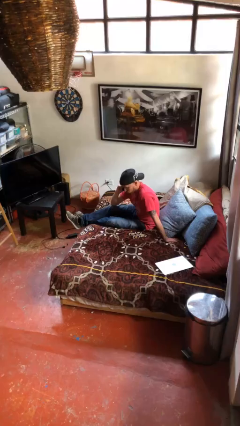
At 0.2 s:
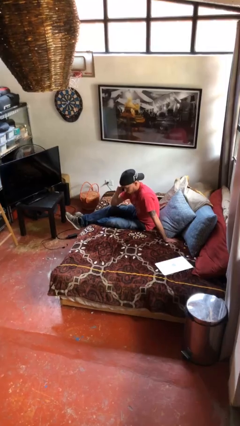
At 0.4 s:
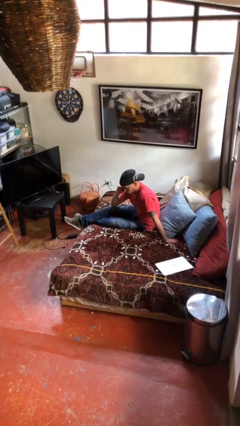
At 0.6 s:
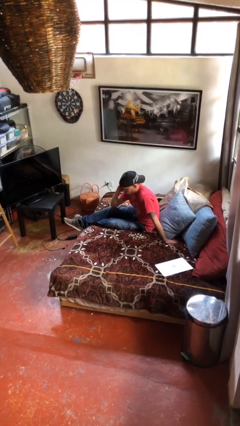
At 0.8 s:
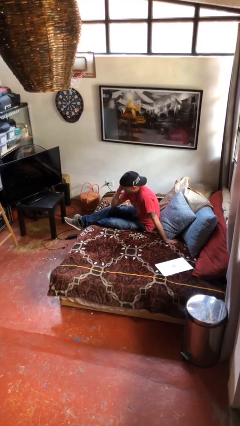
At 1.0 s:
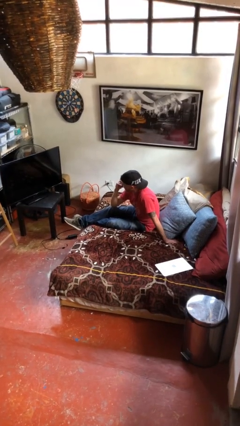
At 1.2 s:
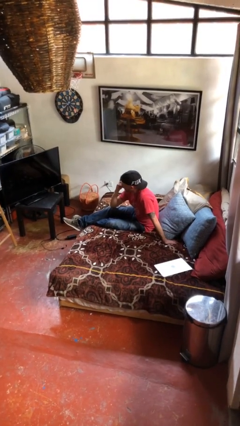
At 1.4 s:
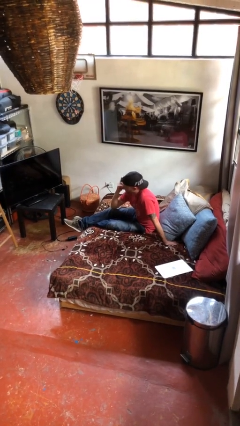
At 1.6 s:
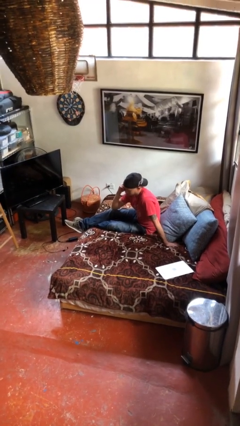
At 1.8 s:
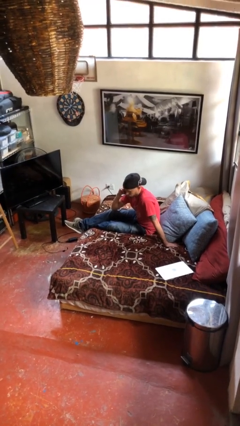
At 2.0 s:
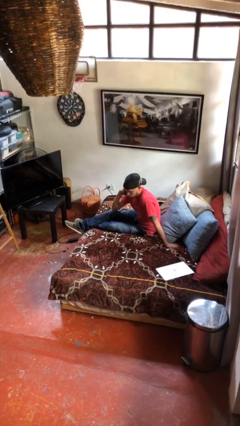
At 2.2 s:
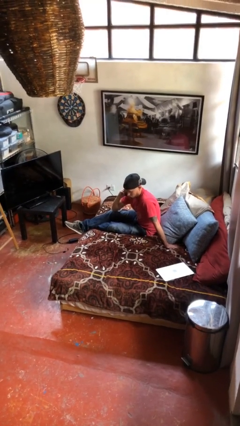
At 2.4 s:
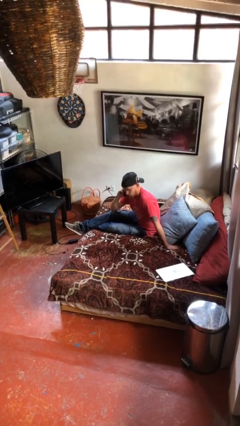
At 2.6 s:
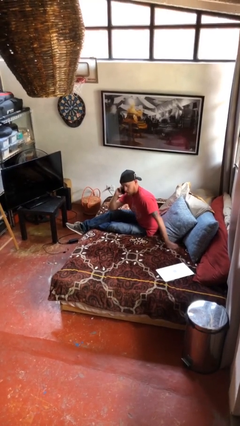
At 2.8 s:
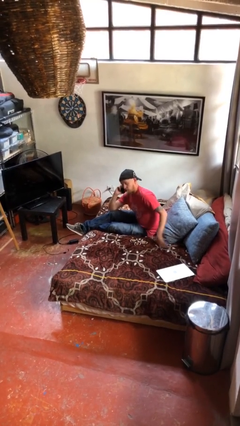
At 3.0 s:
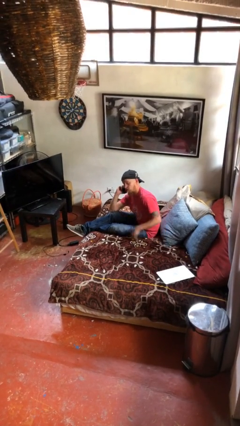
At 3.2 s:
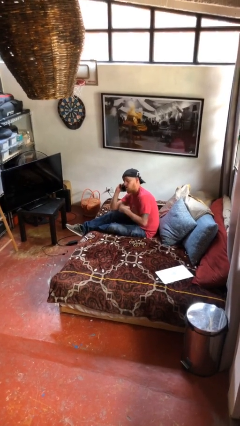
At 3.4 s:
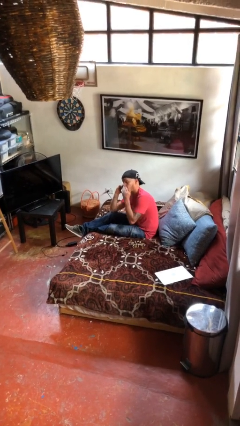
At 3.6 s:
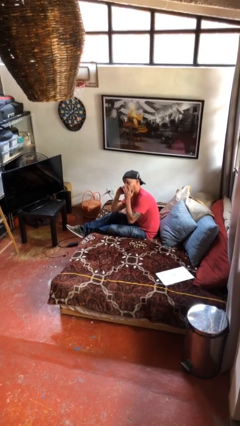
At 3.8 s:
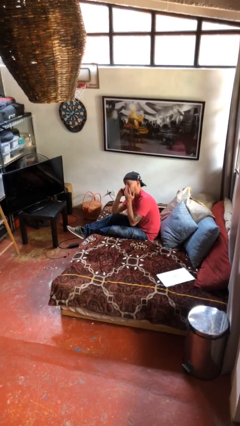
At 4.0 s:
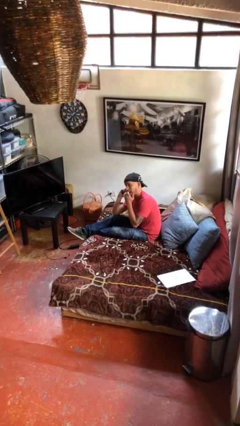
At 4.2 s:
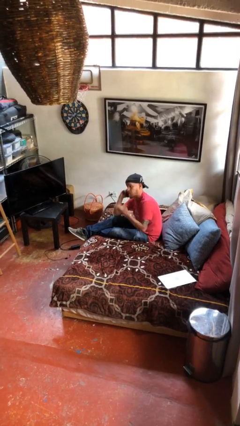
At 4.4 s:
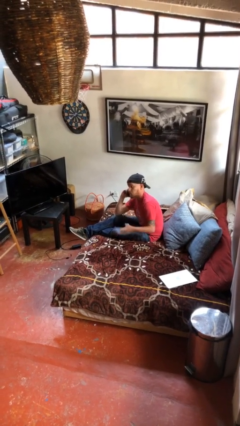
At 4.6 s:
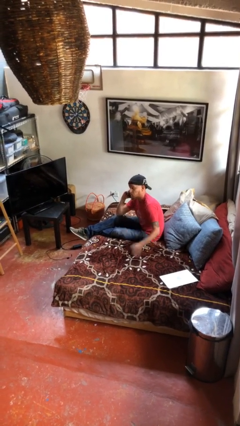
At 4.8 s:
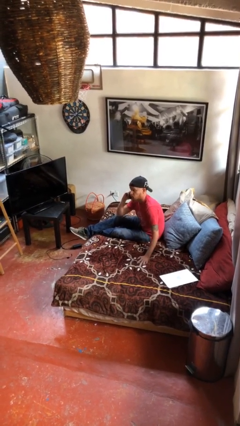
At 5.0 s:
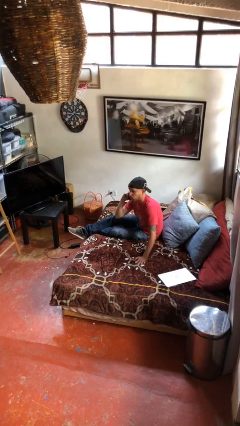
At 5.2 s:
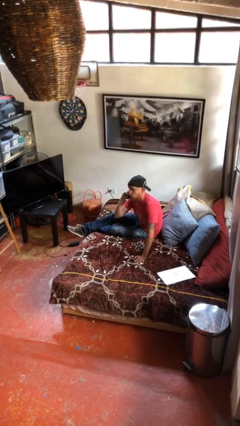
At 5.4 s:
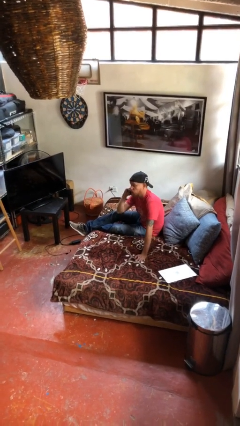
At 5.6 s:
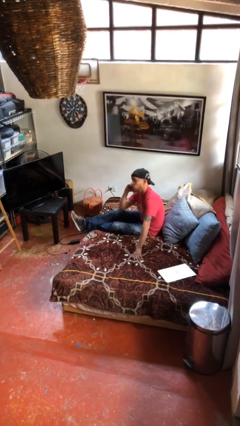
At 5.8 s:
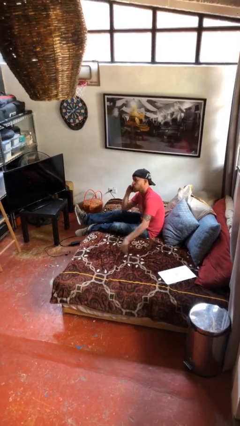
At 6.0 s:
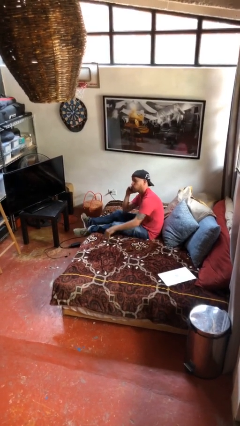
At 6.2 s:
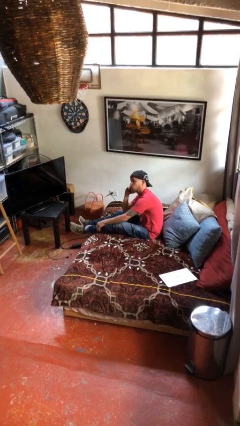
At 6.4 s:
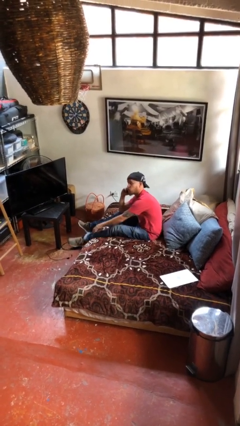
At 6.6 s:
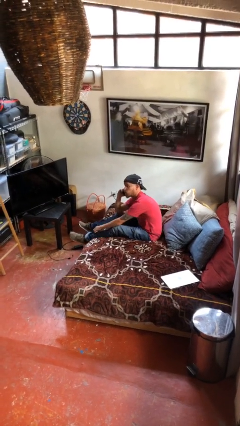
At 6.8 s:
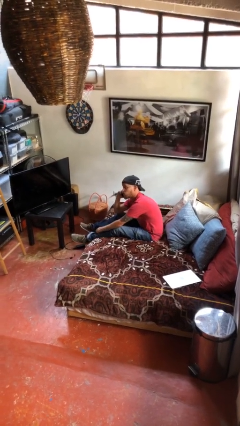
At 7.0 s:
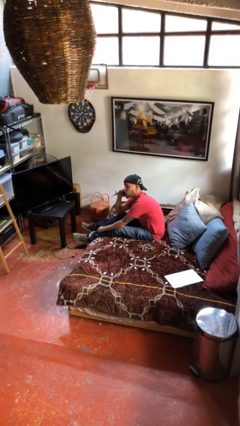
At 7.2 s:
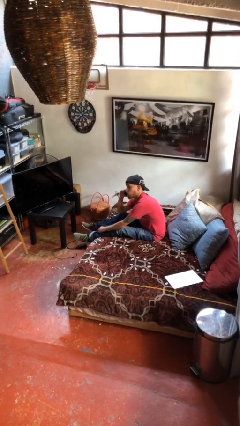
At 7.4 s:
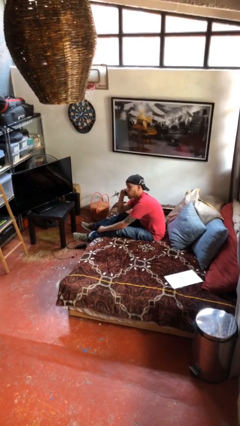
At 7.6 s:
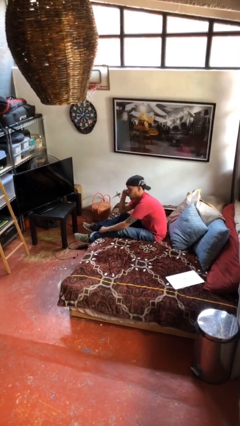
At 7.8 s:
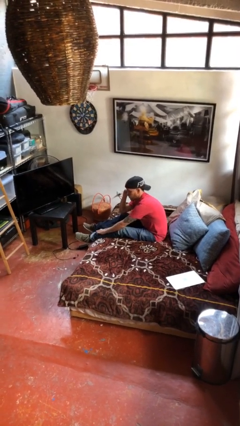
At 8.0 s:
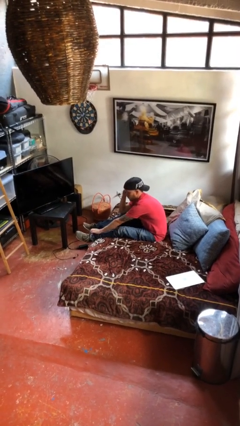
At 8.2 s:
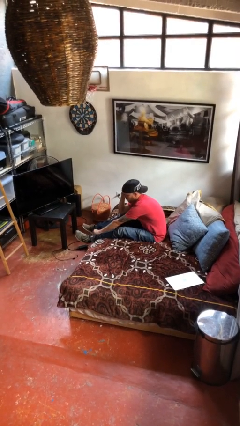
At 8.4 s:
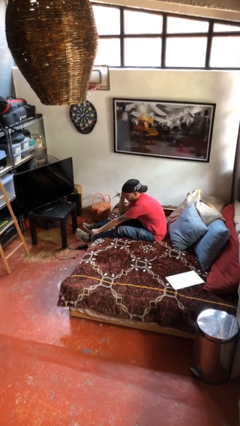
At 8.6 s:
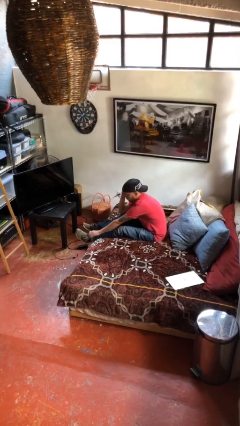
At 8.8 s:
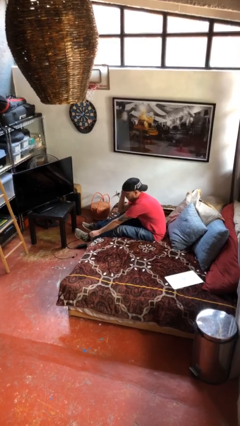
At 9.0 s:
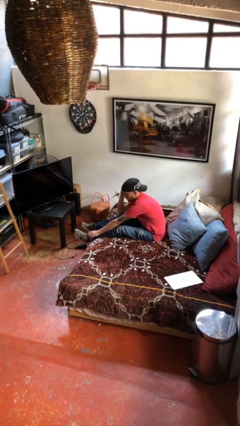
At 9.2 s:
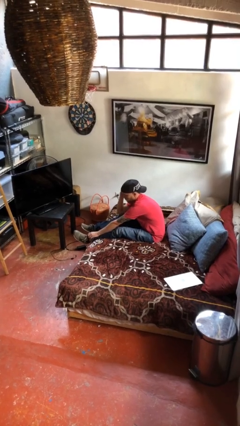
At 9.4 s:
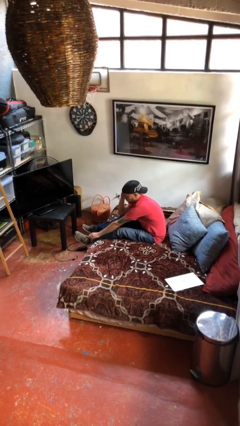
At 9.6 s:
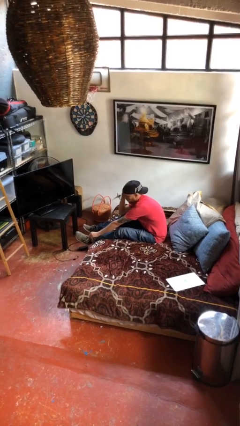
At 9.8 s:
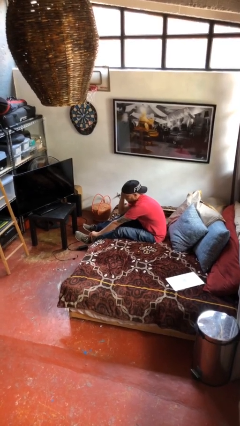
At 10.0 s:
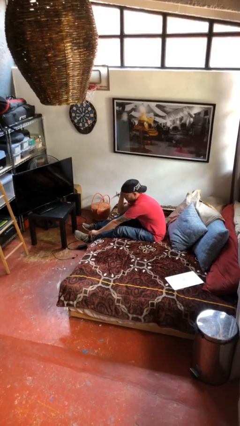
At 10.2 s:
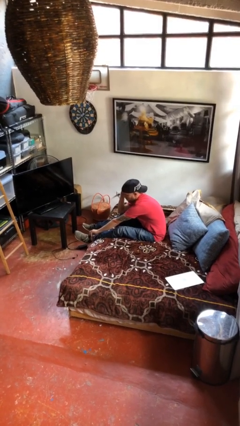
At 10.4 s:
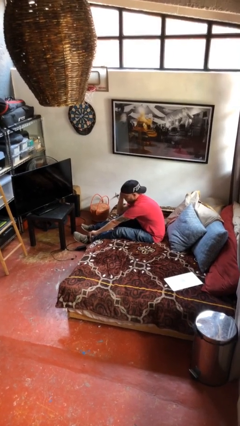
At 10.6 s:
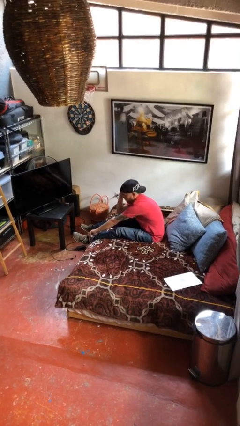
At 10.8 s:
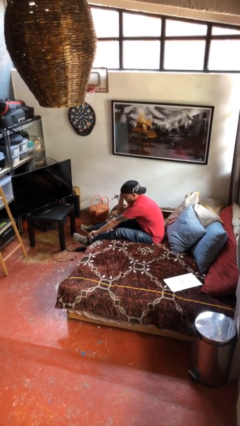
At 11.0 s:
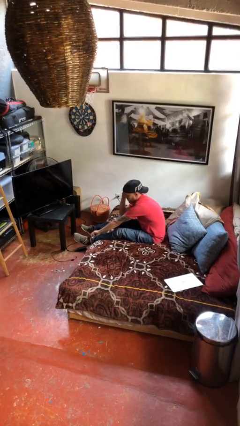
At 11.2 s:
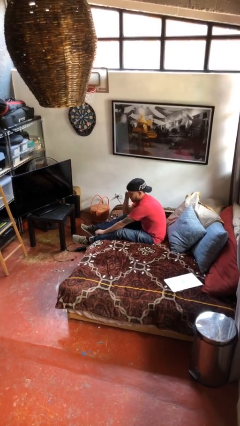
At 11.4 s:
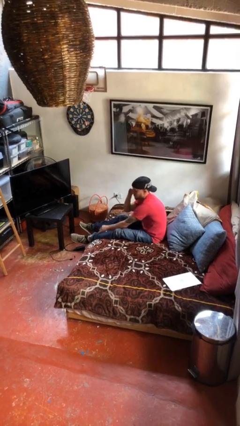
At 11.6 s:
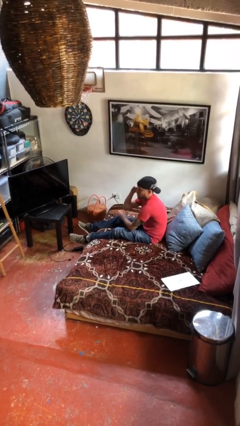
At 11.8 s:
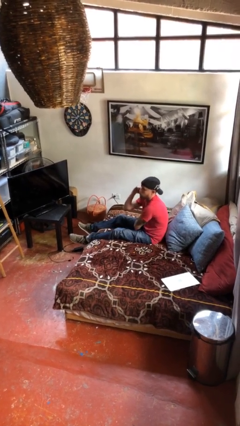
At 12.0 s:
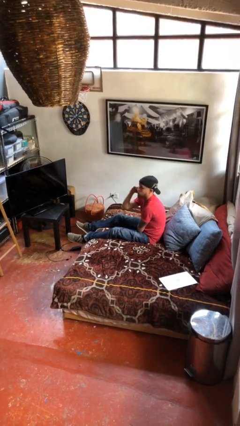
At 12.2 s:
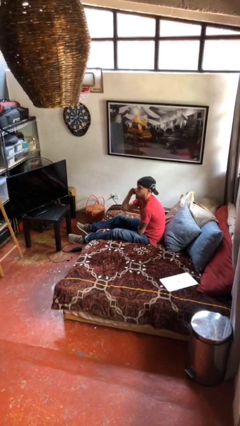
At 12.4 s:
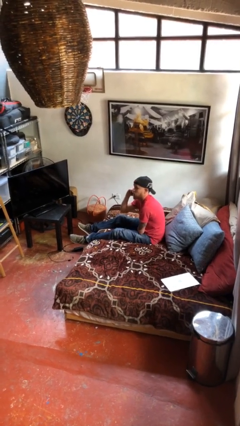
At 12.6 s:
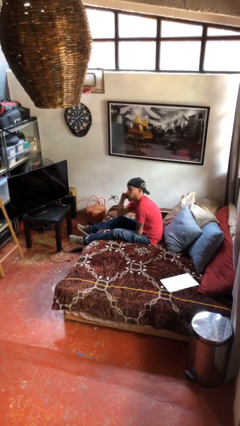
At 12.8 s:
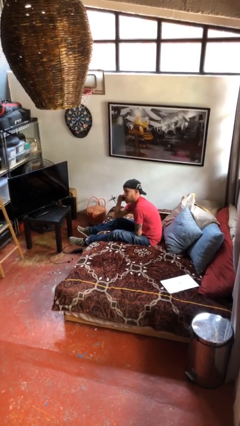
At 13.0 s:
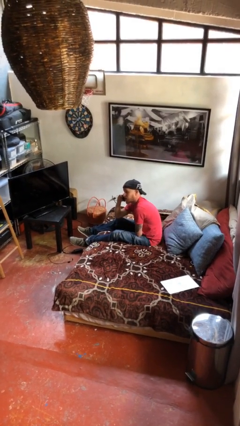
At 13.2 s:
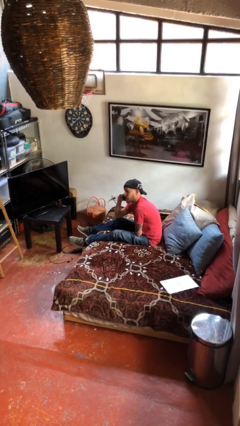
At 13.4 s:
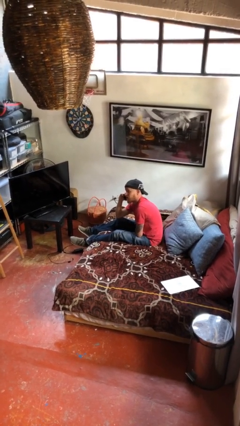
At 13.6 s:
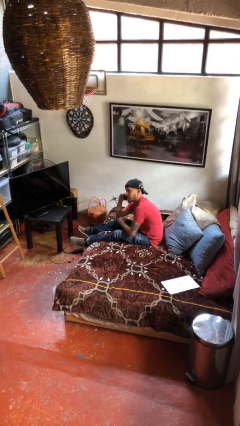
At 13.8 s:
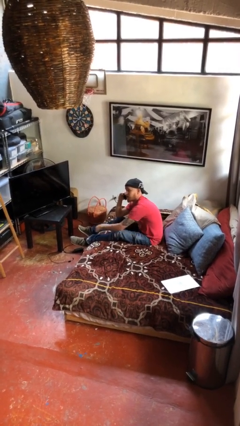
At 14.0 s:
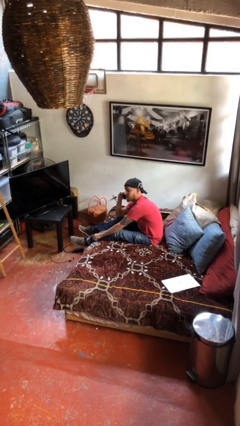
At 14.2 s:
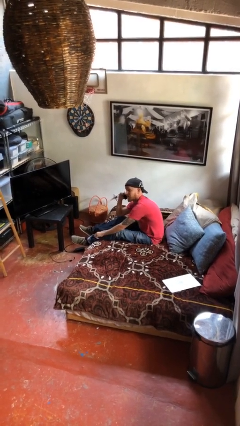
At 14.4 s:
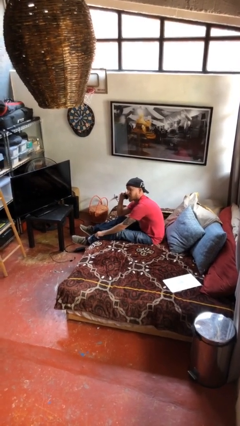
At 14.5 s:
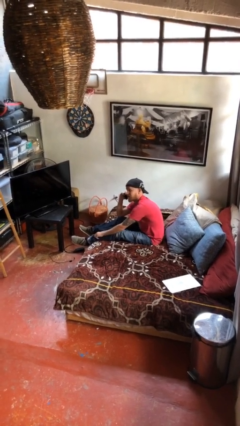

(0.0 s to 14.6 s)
person talks on phone

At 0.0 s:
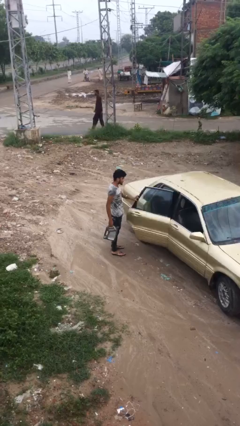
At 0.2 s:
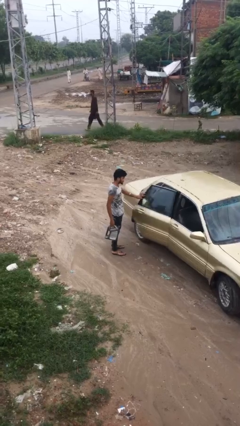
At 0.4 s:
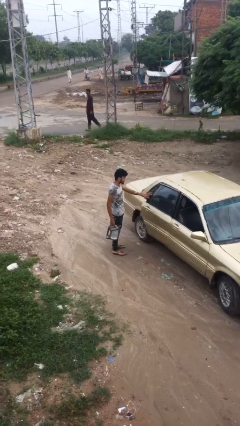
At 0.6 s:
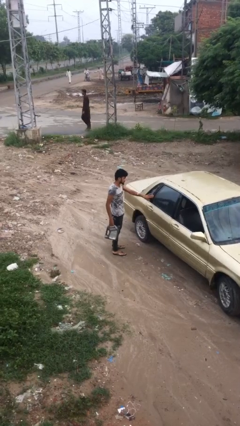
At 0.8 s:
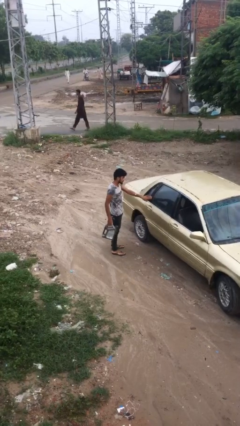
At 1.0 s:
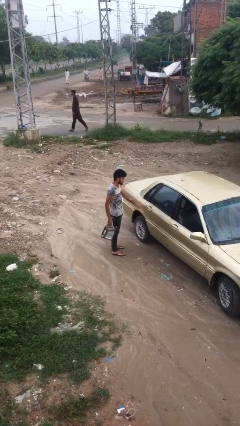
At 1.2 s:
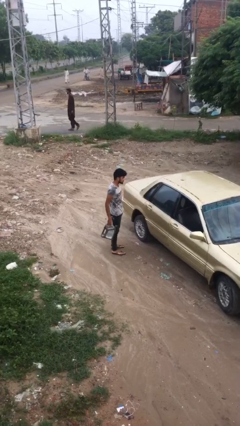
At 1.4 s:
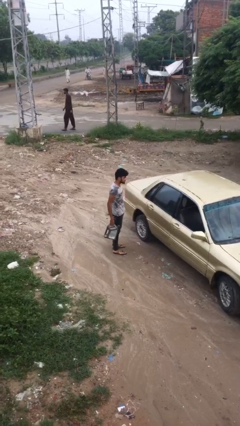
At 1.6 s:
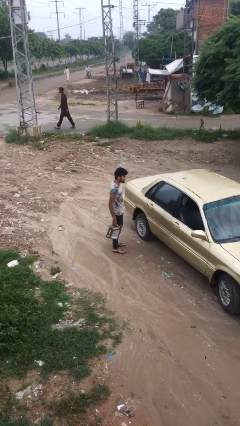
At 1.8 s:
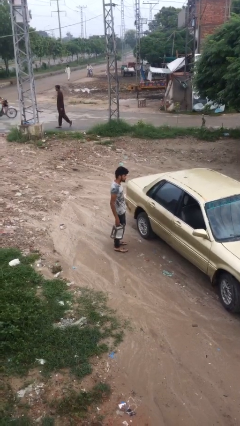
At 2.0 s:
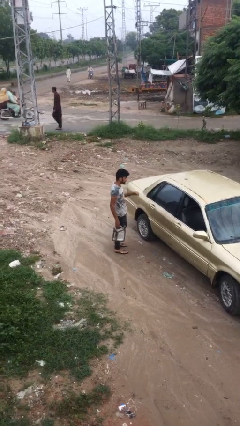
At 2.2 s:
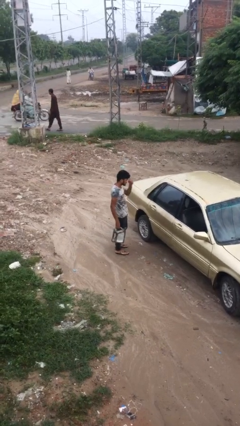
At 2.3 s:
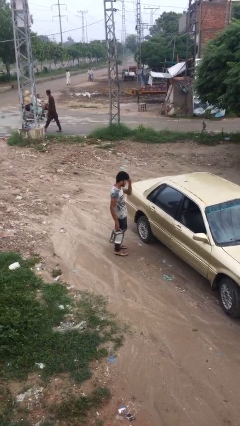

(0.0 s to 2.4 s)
person closes car door

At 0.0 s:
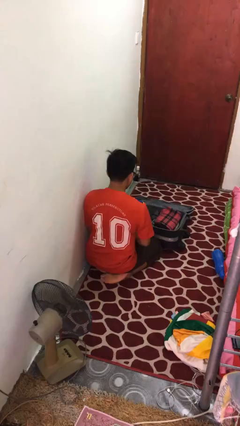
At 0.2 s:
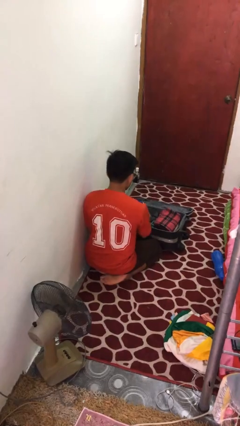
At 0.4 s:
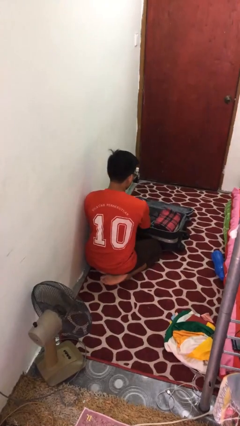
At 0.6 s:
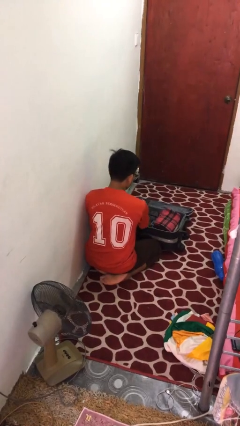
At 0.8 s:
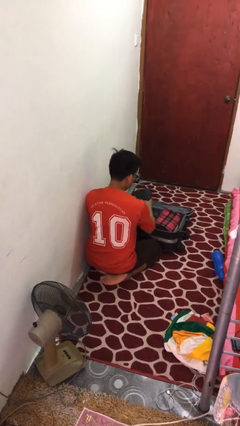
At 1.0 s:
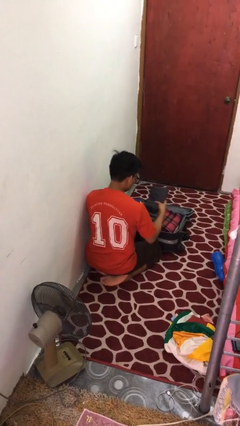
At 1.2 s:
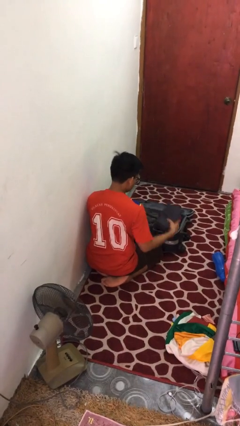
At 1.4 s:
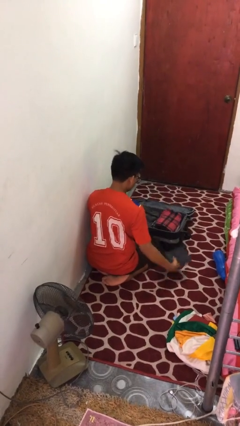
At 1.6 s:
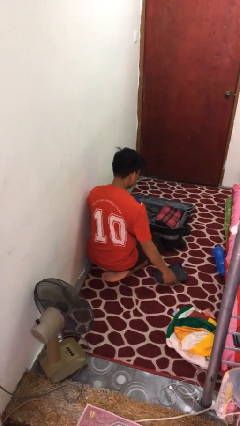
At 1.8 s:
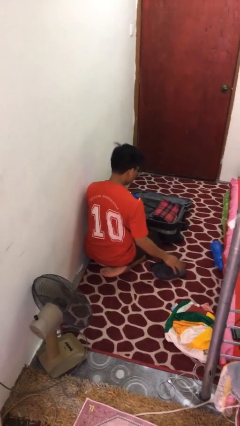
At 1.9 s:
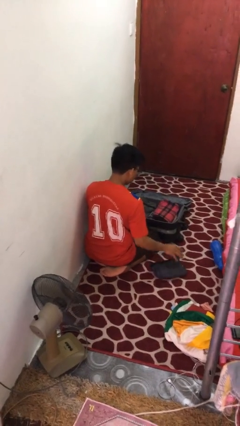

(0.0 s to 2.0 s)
person unloads clothes from suitcase
